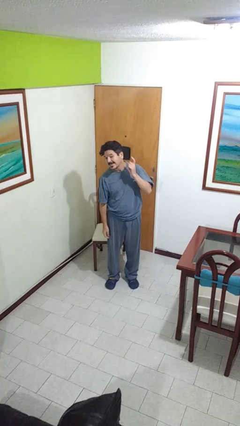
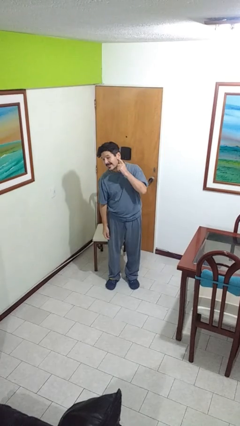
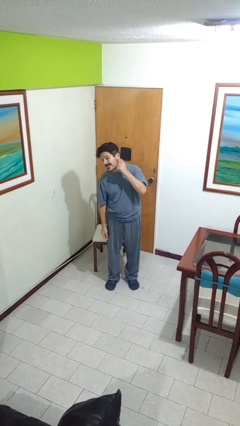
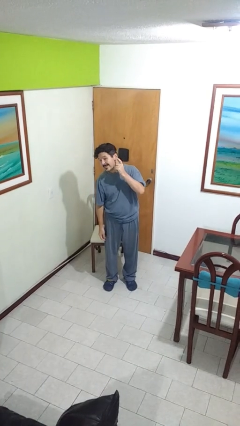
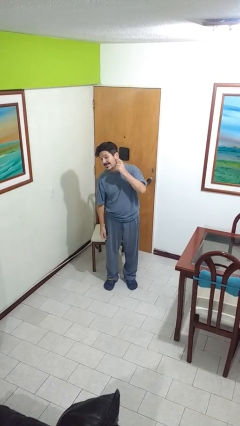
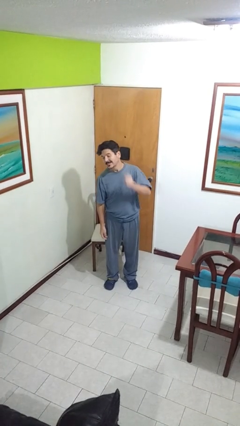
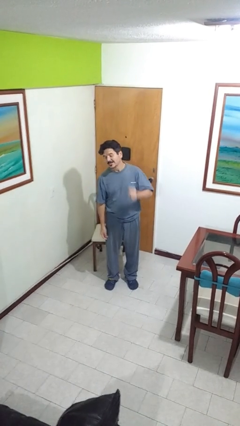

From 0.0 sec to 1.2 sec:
person gestures listen closely

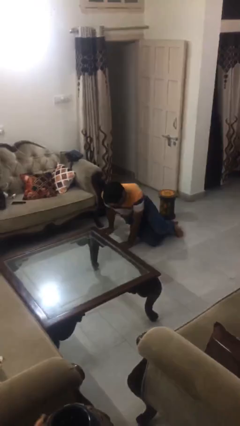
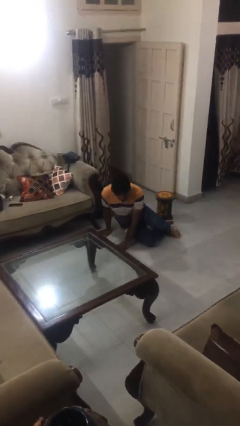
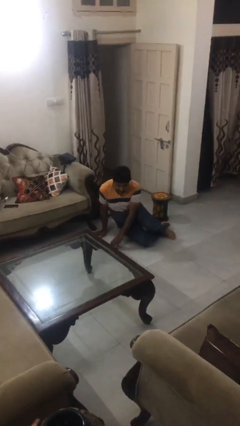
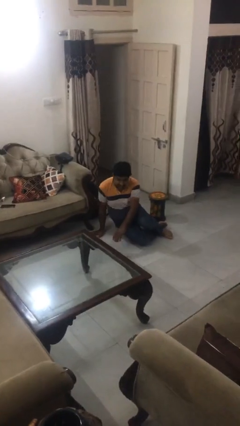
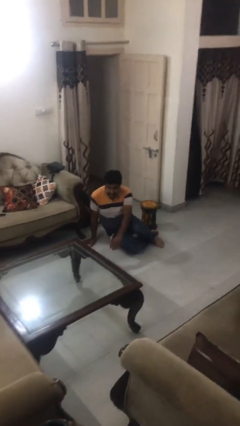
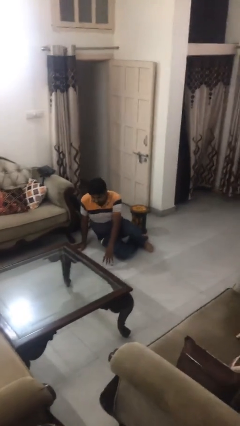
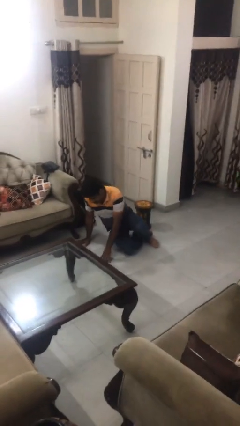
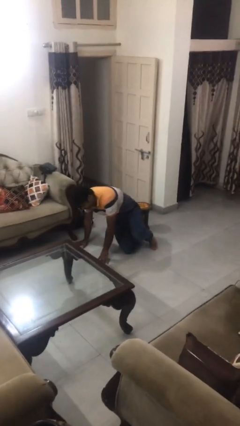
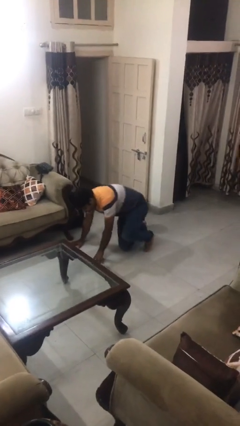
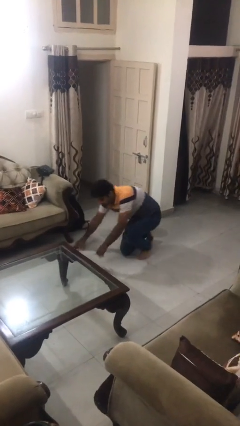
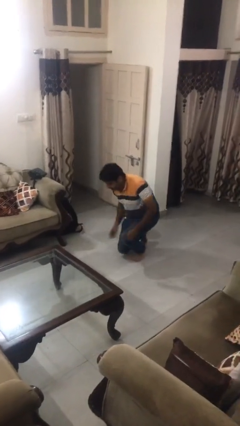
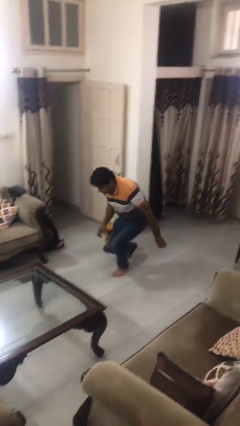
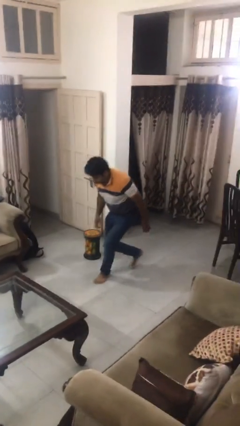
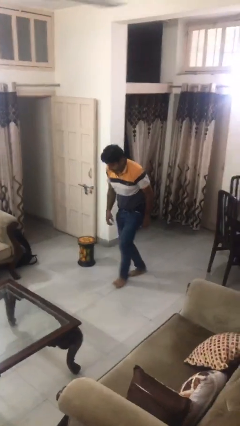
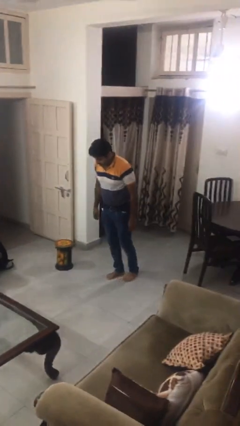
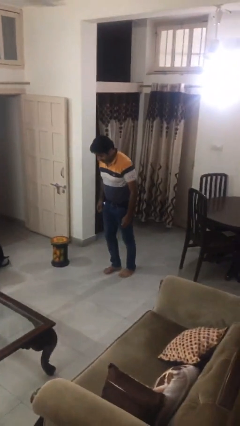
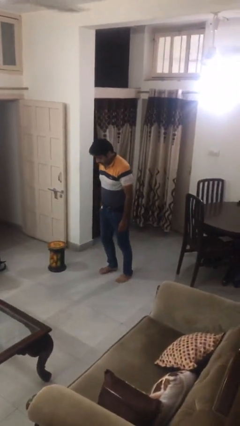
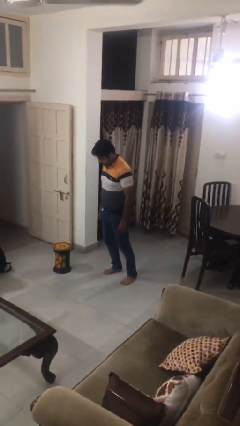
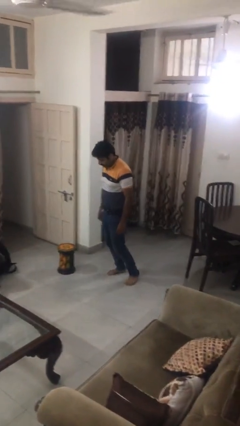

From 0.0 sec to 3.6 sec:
person stands up from floor

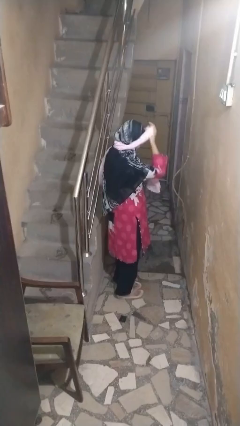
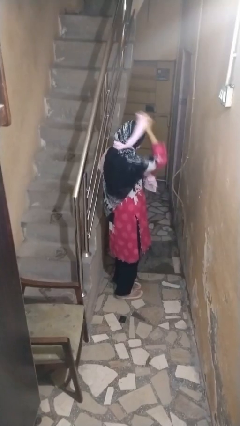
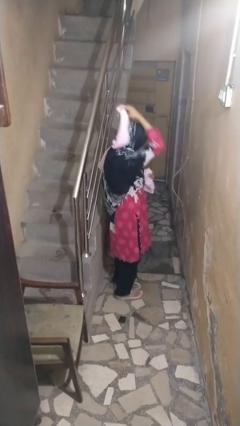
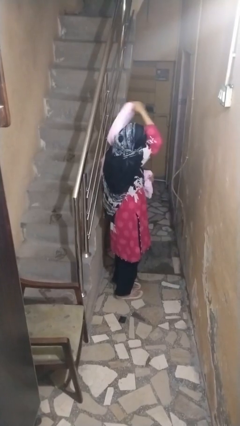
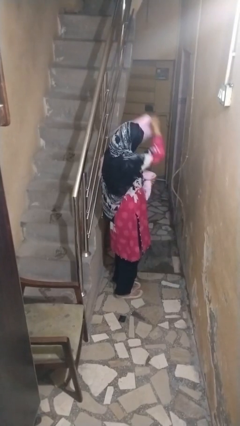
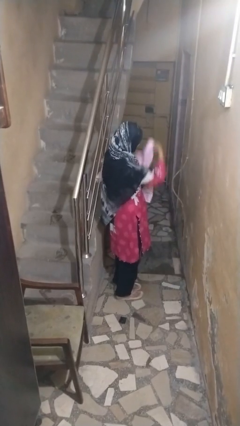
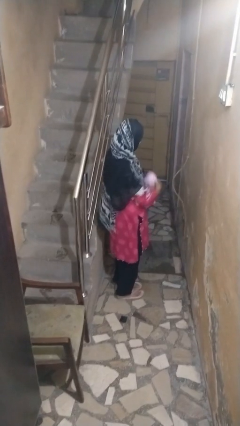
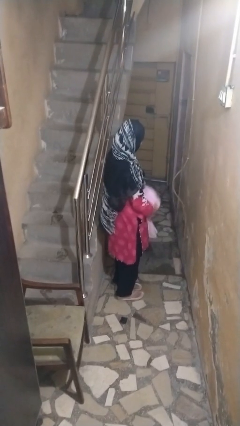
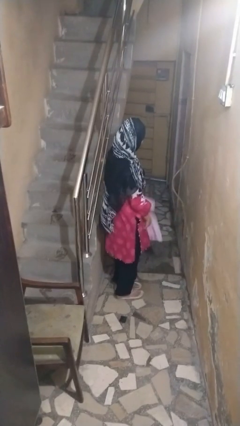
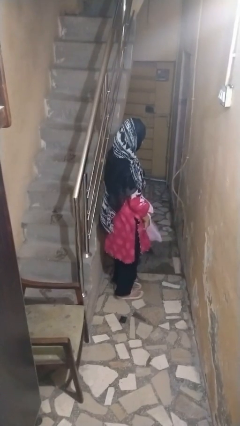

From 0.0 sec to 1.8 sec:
person takes off scarf

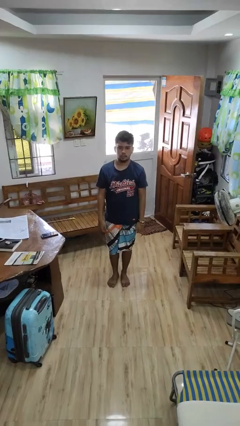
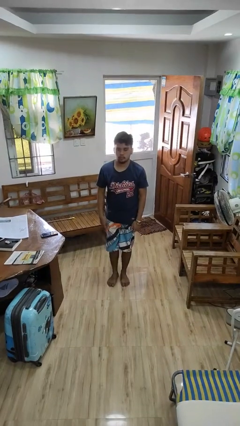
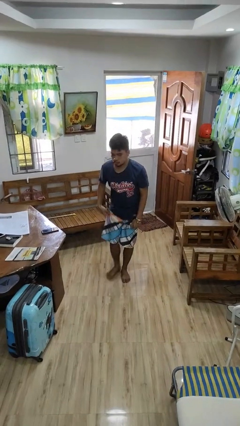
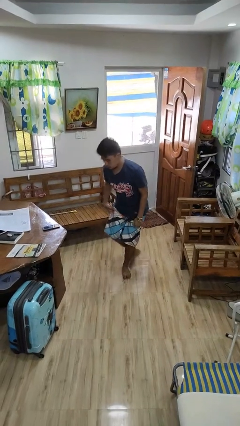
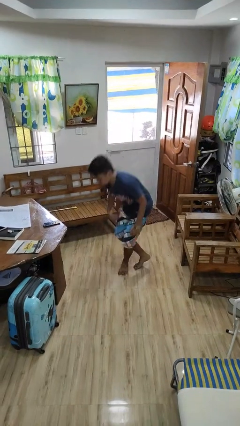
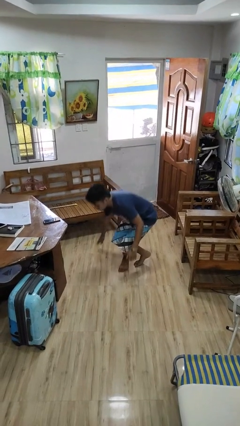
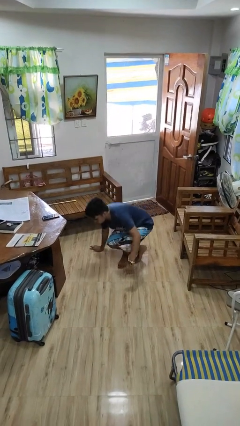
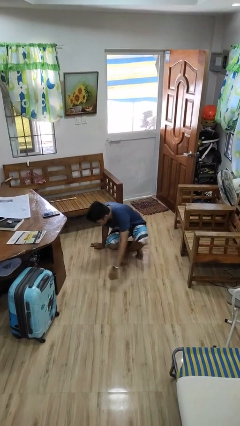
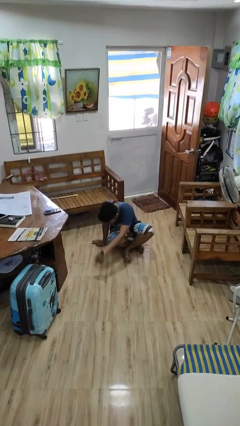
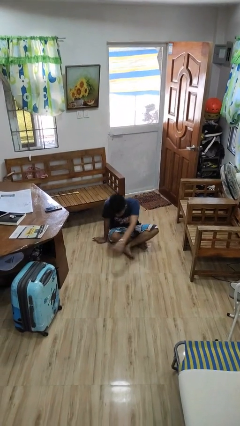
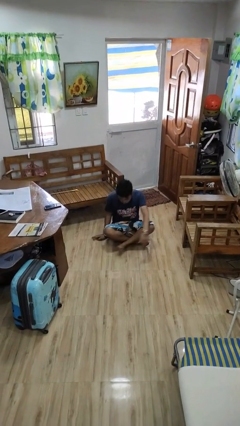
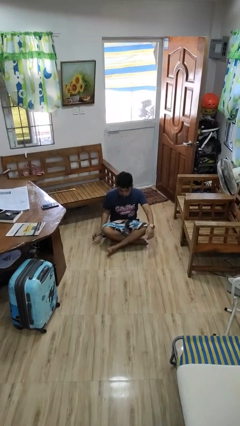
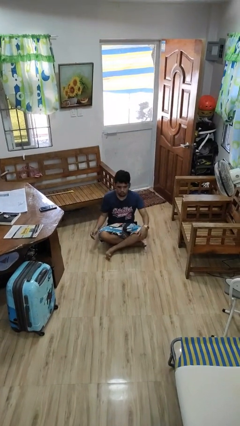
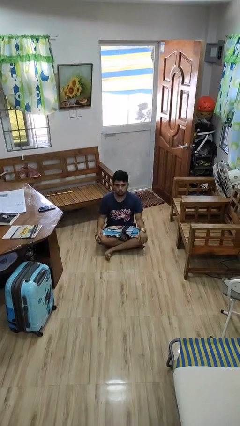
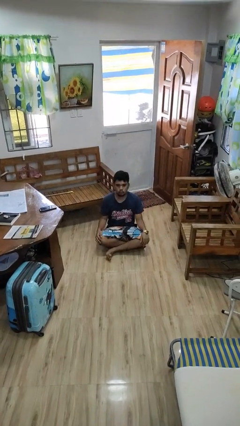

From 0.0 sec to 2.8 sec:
person sits crisscross

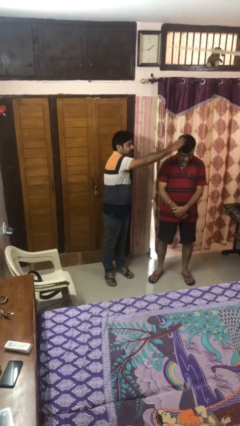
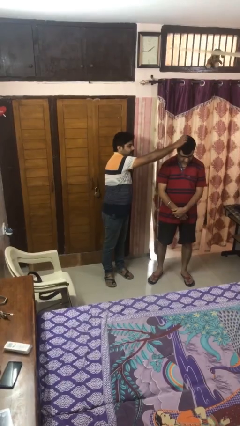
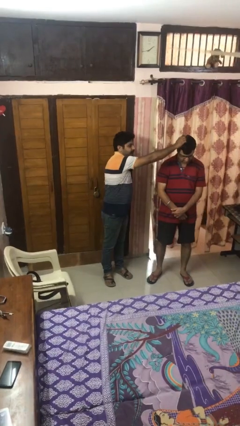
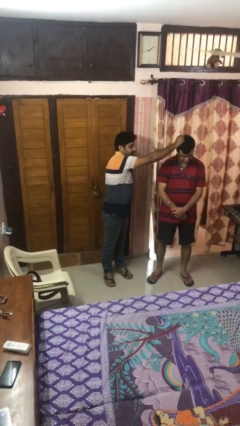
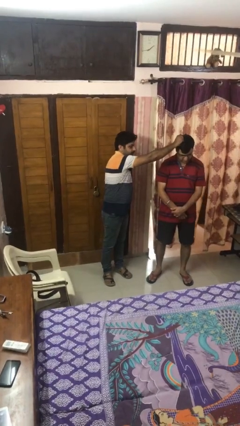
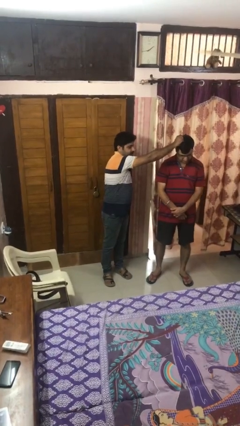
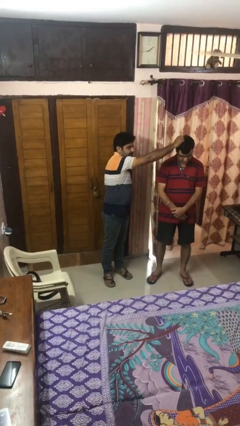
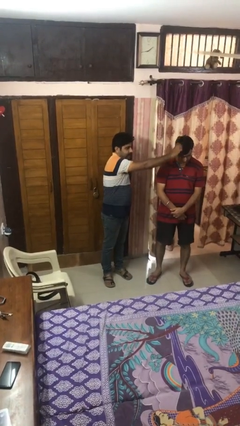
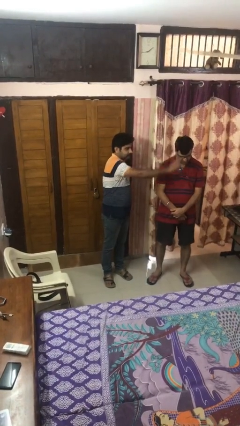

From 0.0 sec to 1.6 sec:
person grabs person by hair

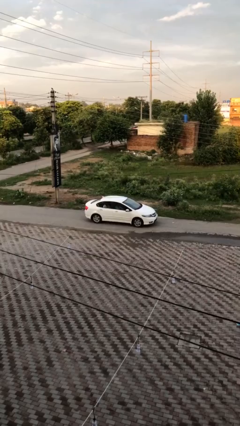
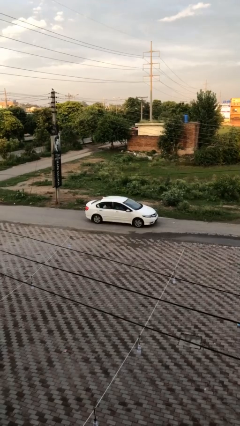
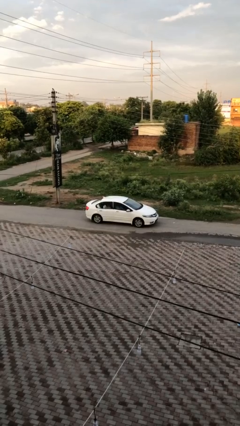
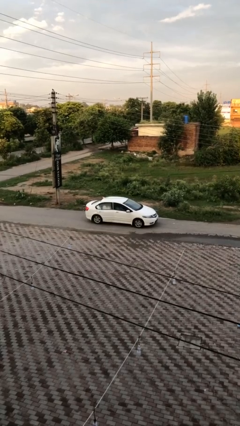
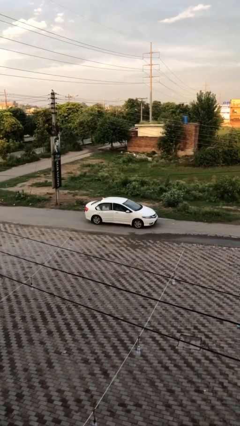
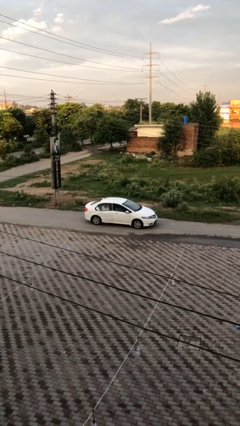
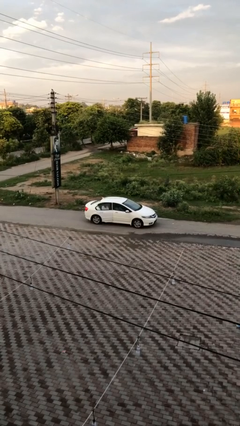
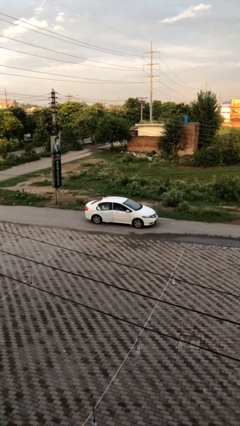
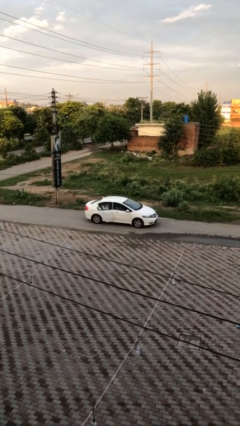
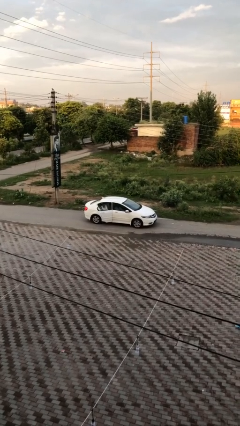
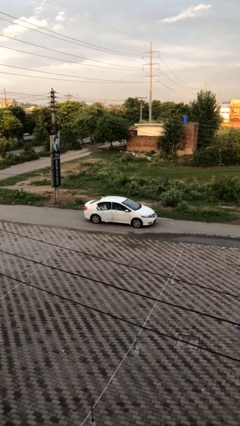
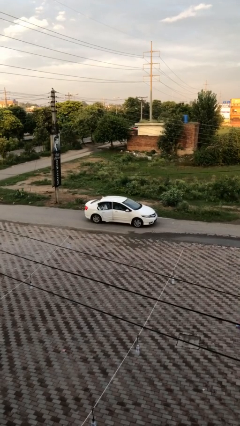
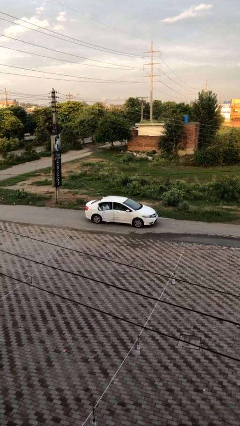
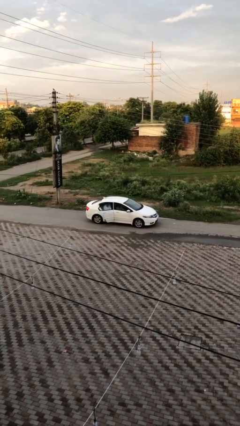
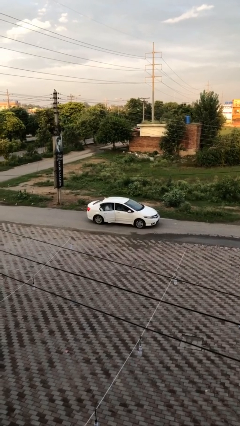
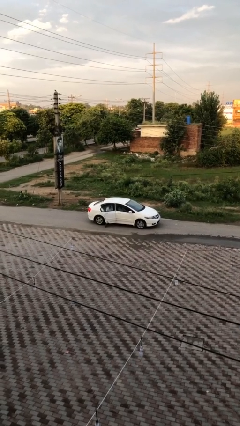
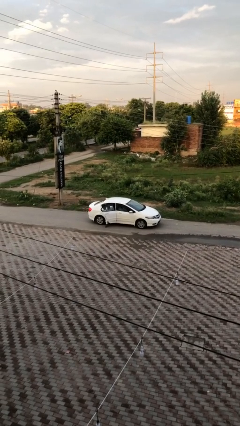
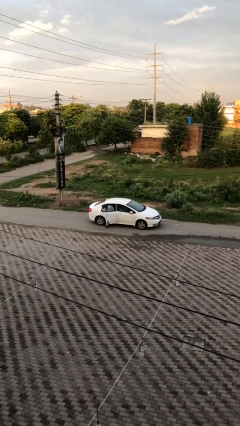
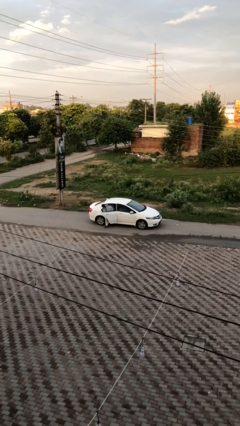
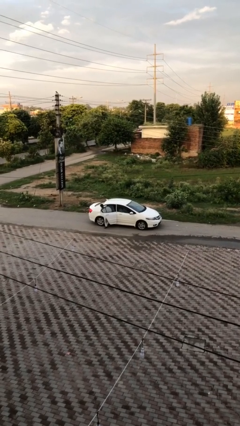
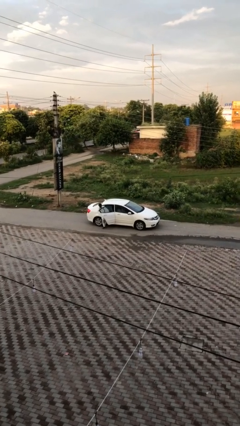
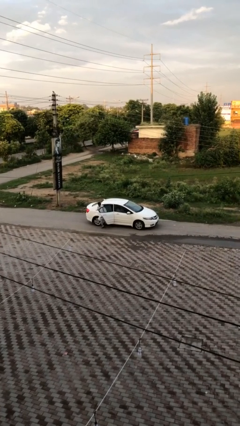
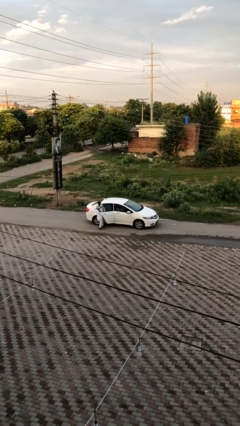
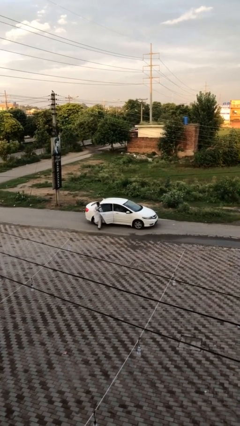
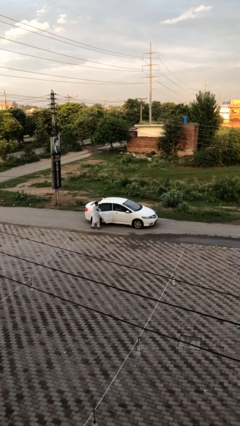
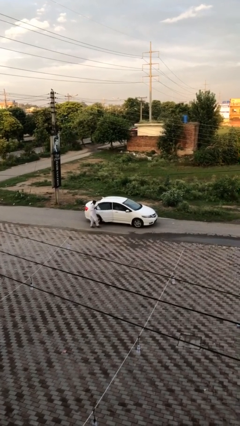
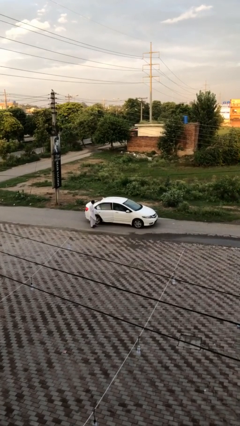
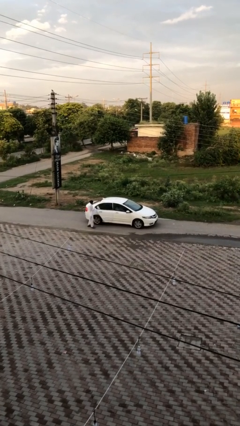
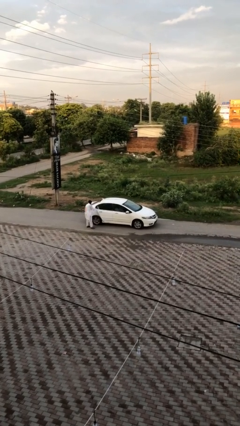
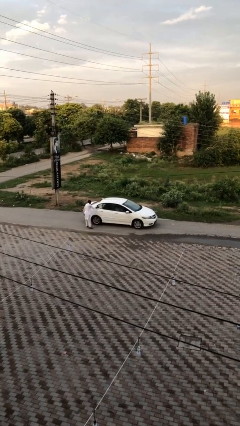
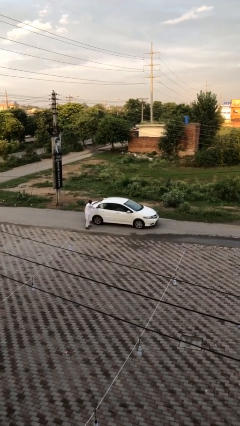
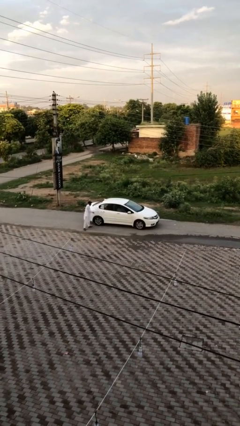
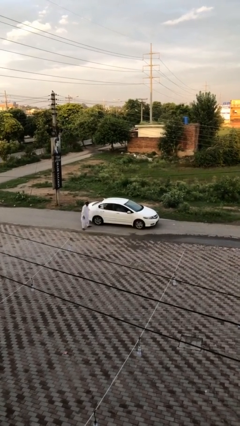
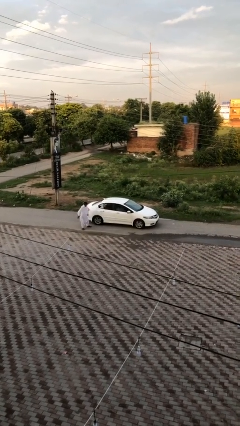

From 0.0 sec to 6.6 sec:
car drops off person
